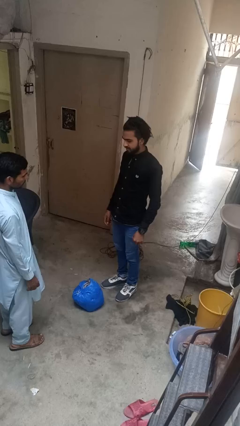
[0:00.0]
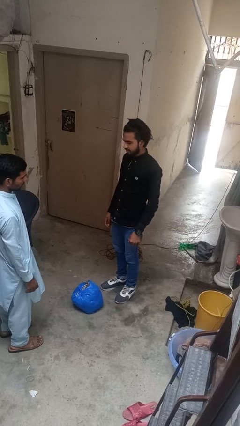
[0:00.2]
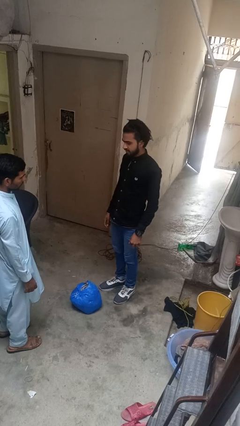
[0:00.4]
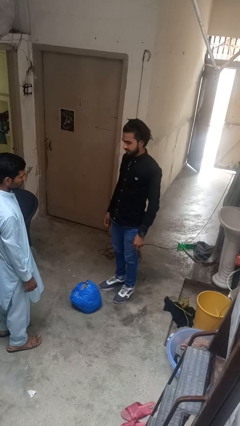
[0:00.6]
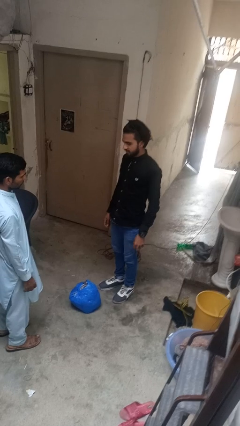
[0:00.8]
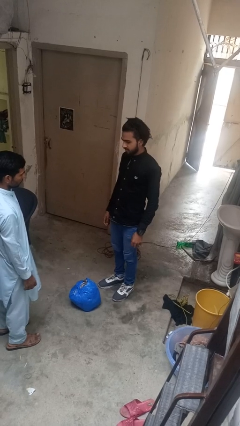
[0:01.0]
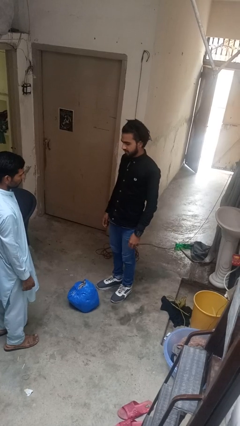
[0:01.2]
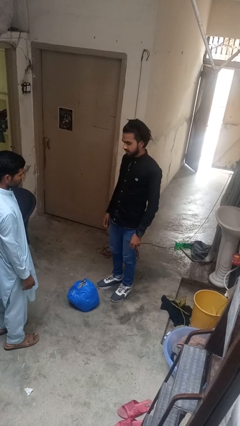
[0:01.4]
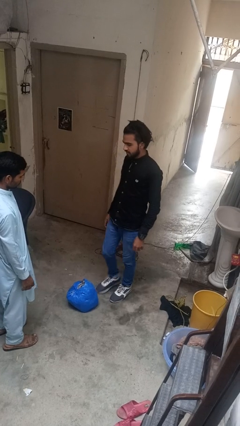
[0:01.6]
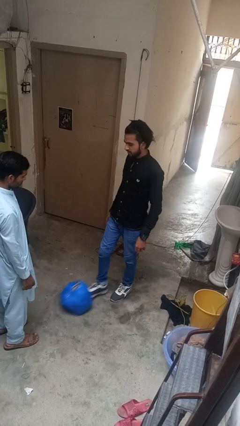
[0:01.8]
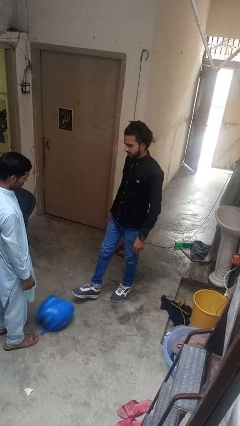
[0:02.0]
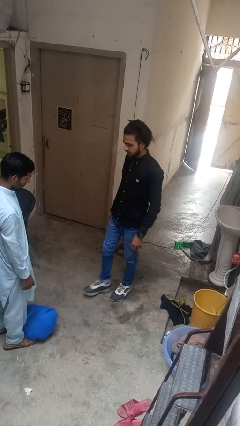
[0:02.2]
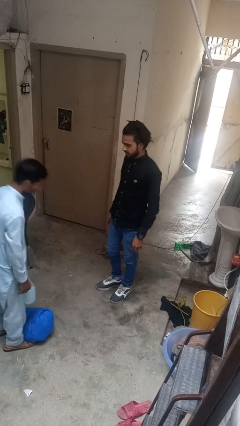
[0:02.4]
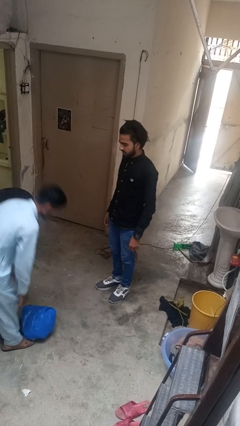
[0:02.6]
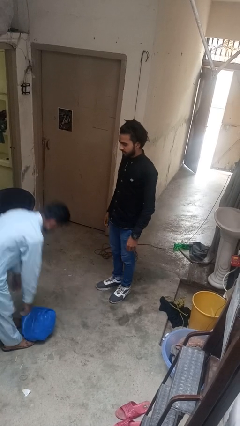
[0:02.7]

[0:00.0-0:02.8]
person kicks object to person

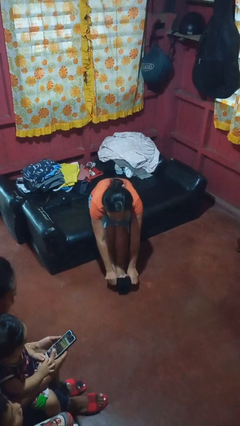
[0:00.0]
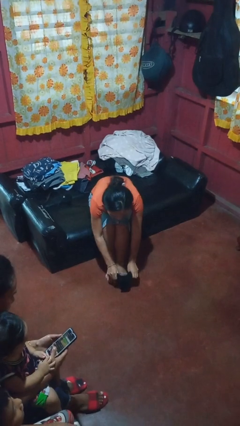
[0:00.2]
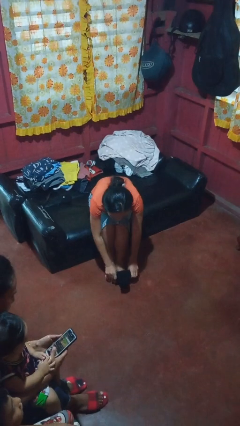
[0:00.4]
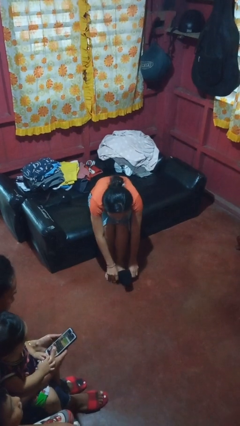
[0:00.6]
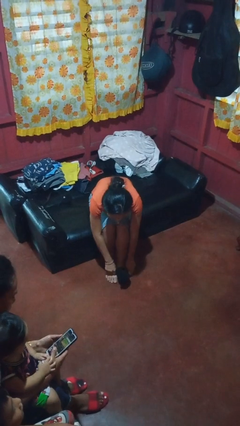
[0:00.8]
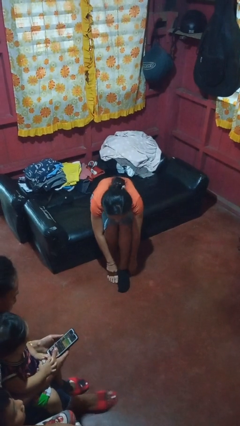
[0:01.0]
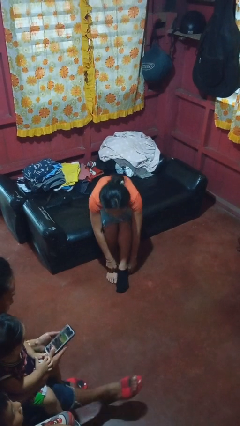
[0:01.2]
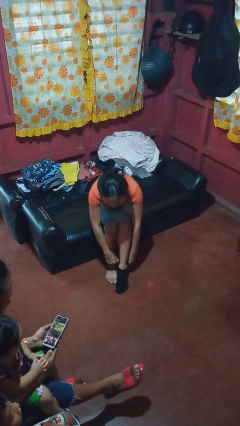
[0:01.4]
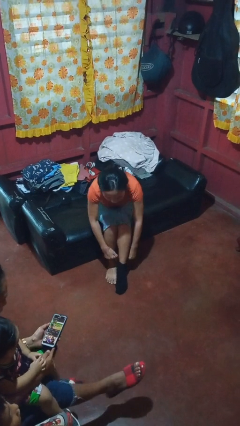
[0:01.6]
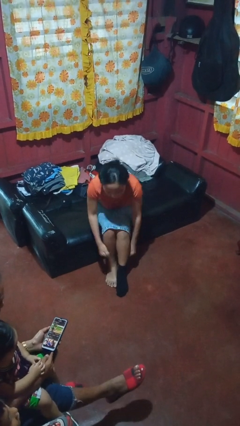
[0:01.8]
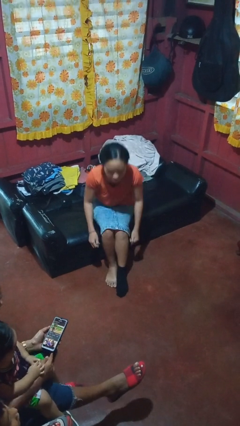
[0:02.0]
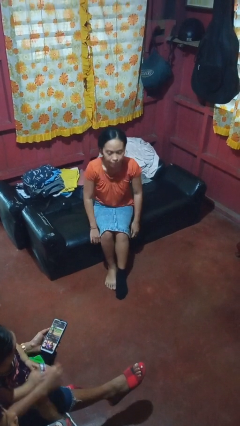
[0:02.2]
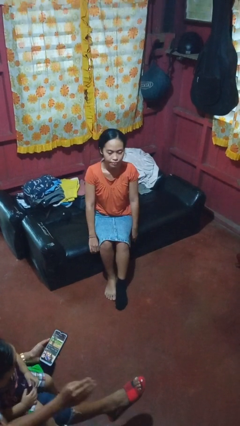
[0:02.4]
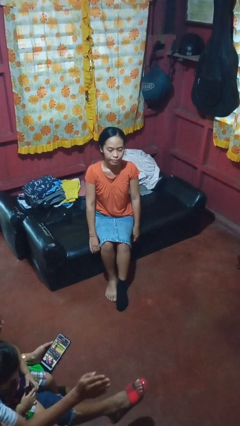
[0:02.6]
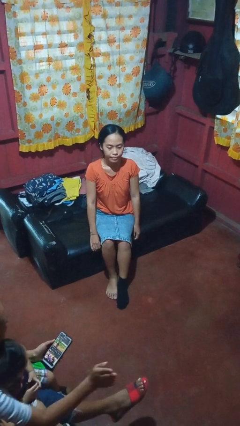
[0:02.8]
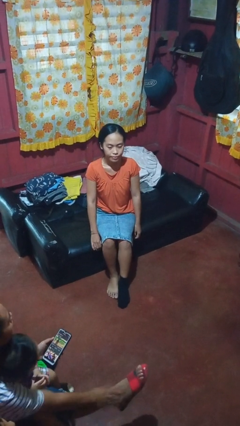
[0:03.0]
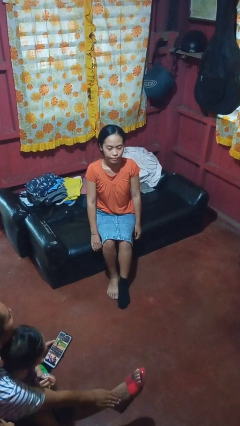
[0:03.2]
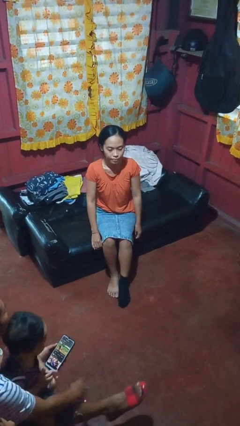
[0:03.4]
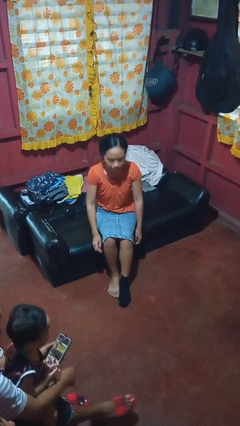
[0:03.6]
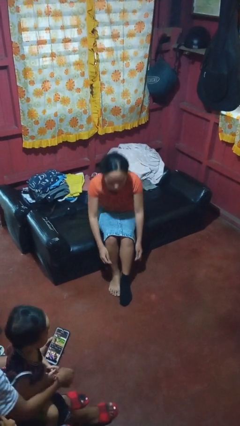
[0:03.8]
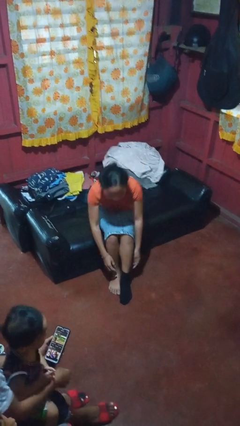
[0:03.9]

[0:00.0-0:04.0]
person puts on socks

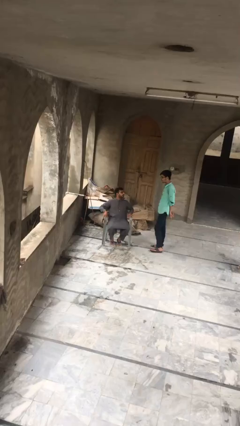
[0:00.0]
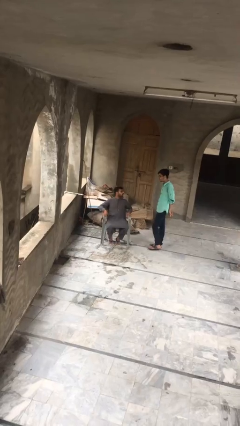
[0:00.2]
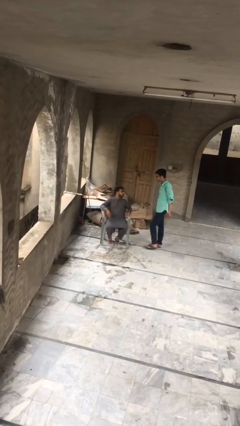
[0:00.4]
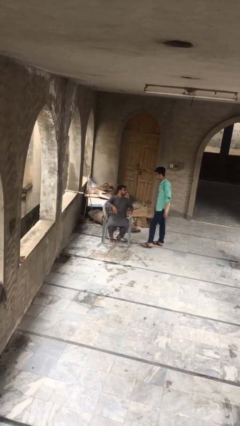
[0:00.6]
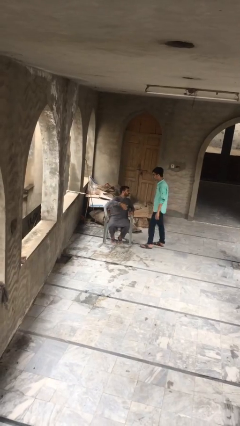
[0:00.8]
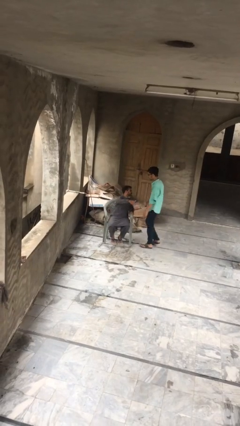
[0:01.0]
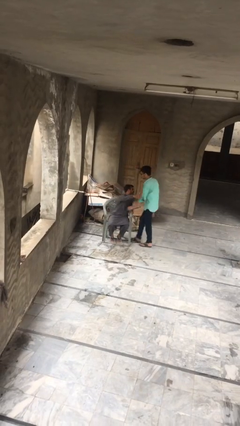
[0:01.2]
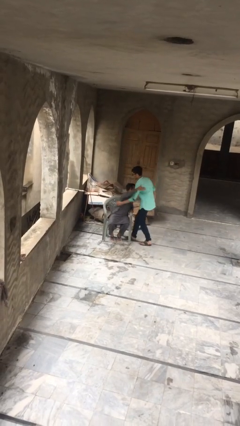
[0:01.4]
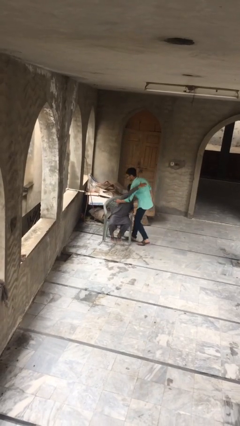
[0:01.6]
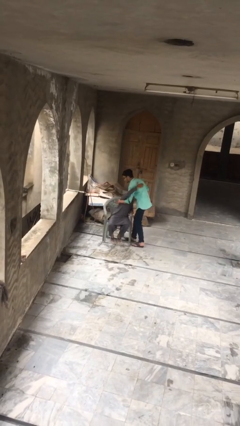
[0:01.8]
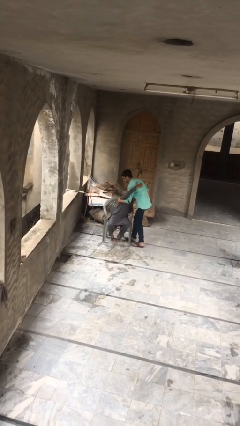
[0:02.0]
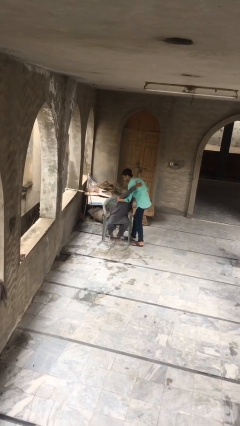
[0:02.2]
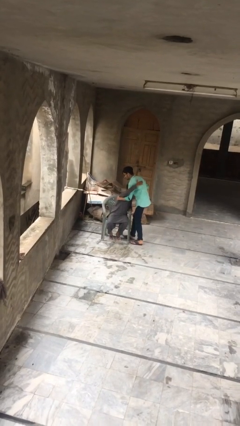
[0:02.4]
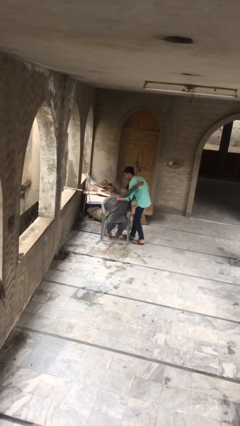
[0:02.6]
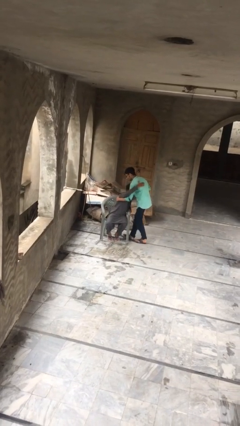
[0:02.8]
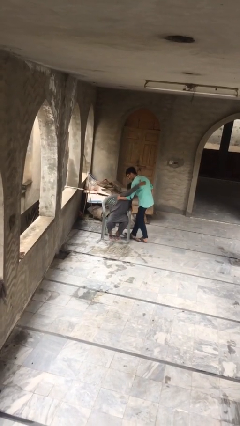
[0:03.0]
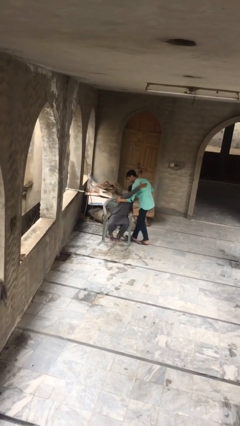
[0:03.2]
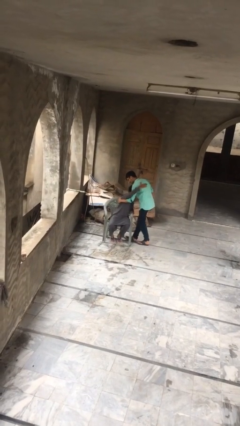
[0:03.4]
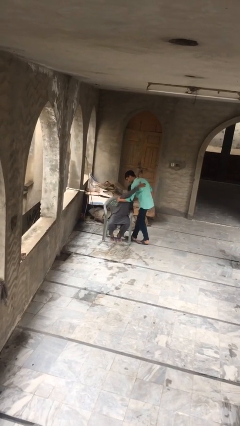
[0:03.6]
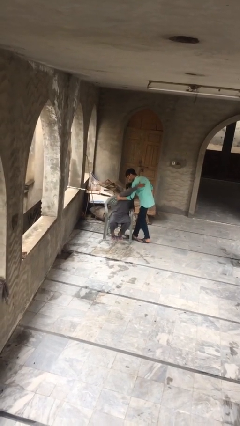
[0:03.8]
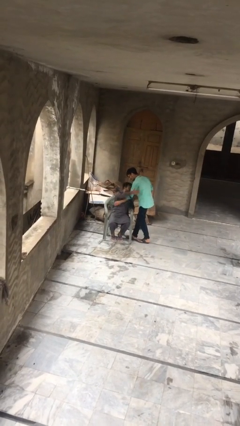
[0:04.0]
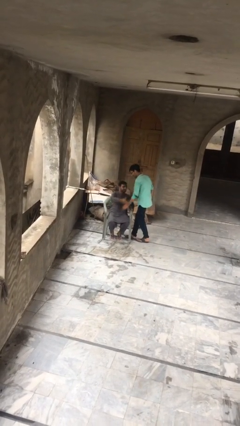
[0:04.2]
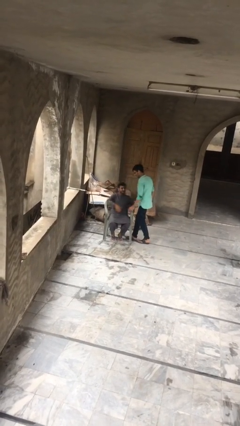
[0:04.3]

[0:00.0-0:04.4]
person embraces person

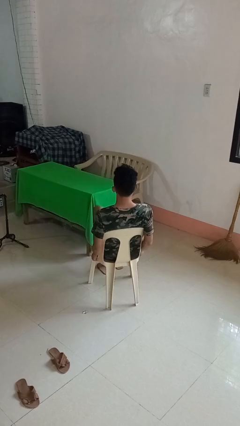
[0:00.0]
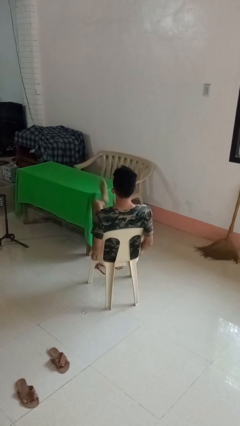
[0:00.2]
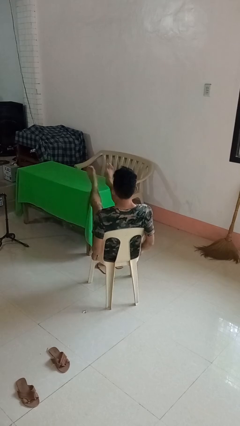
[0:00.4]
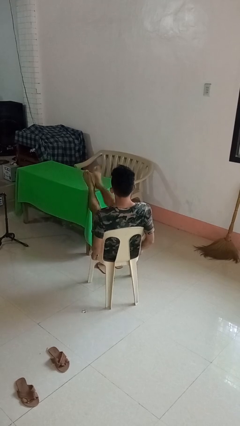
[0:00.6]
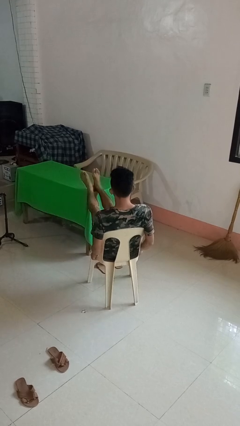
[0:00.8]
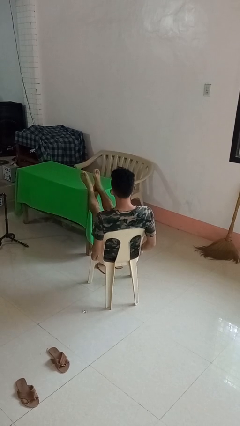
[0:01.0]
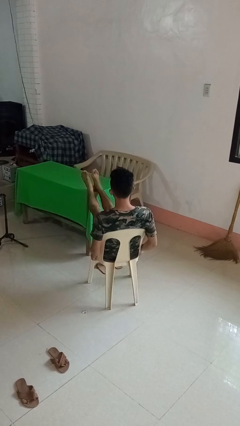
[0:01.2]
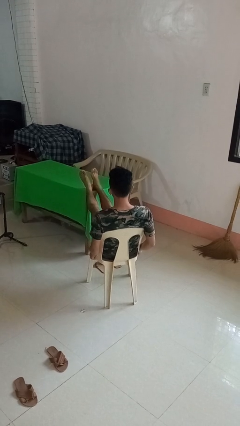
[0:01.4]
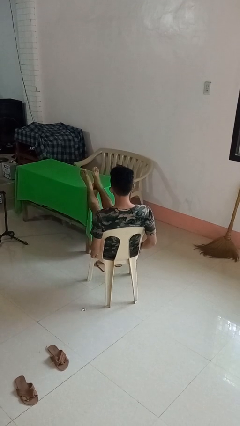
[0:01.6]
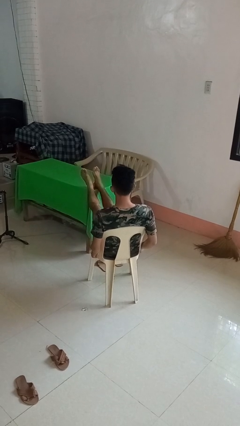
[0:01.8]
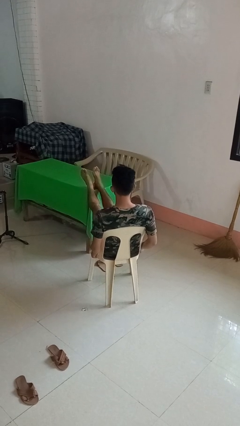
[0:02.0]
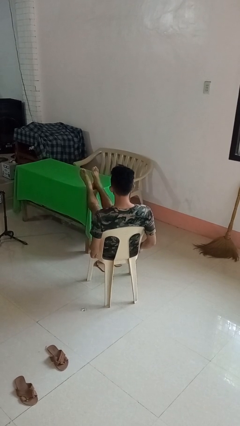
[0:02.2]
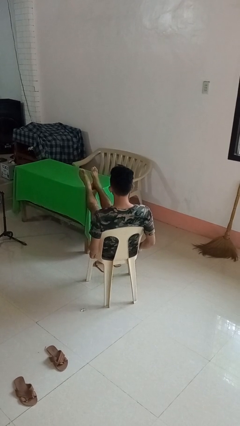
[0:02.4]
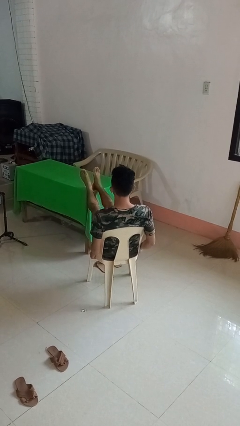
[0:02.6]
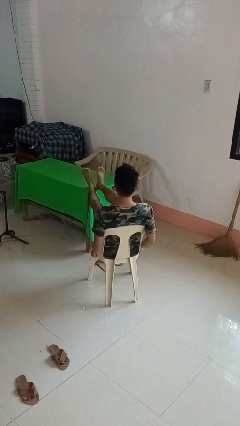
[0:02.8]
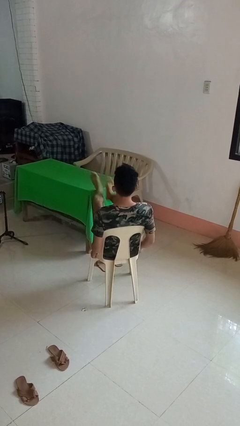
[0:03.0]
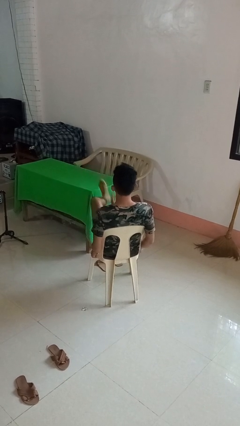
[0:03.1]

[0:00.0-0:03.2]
person puts feet up

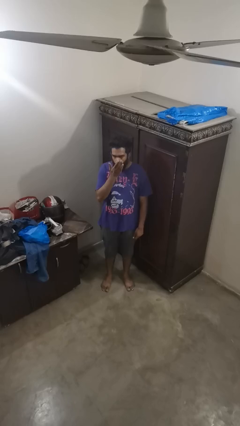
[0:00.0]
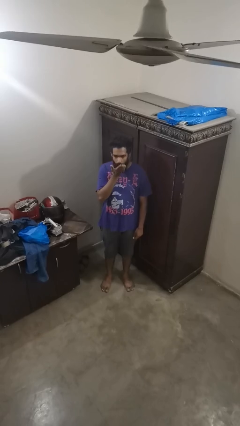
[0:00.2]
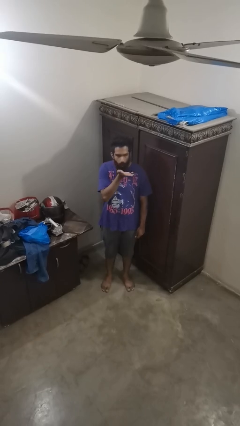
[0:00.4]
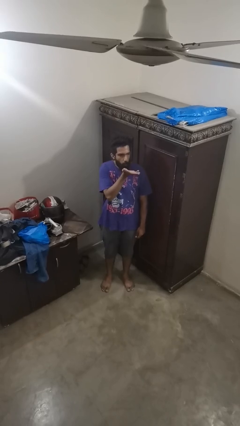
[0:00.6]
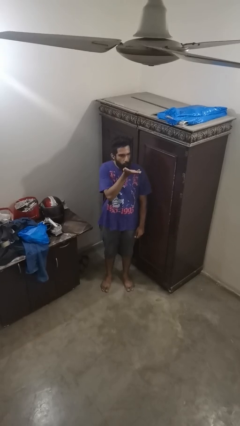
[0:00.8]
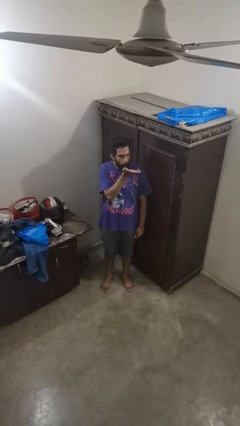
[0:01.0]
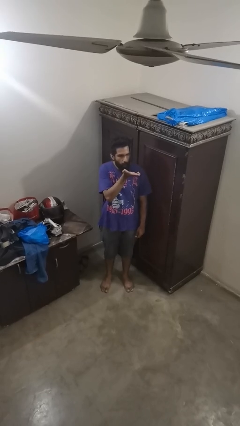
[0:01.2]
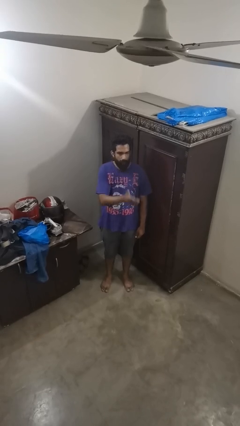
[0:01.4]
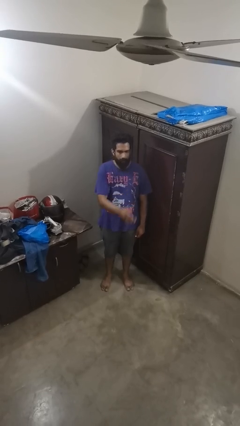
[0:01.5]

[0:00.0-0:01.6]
person gestures blow kiss

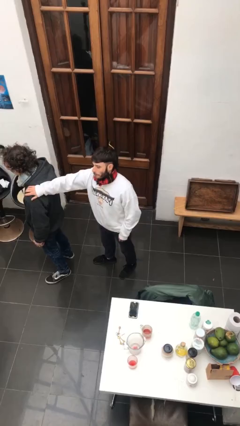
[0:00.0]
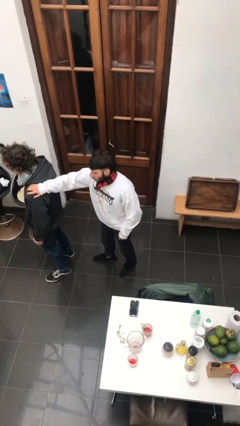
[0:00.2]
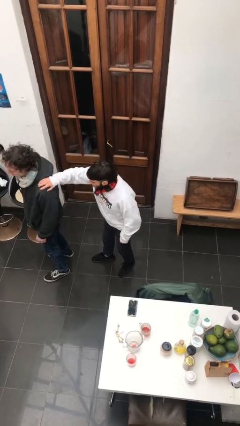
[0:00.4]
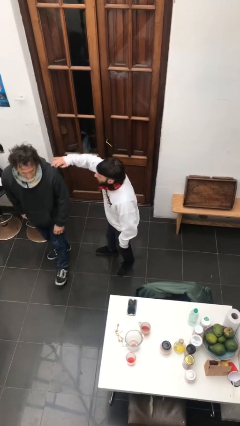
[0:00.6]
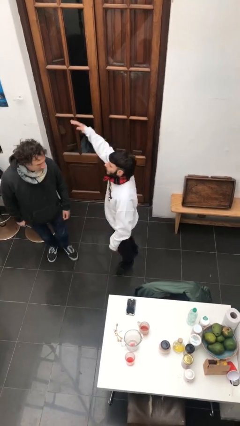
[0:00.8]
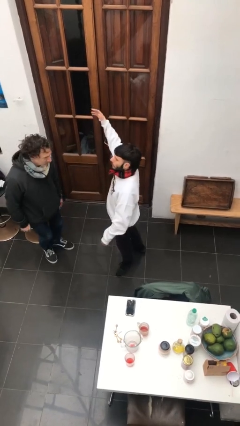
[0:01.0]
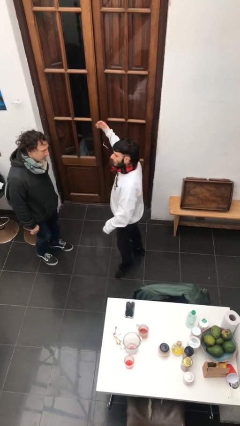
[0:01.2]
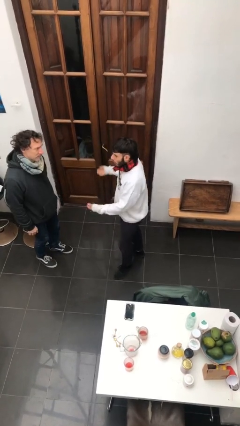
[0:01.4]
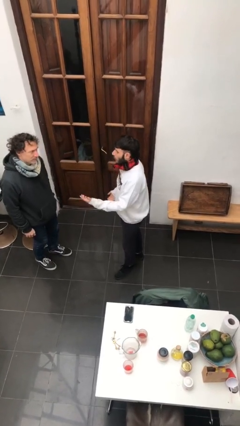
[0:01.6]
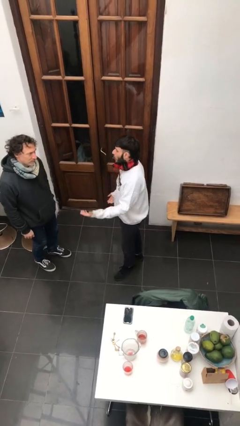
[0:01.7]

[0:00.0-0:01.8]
person spins person around
